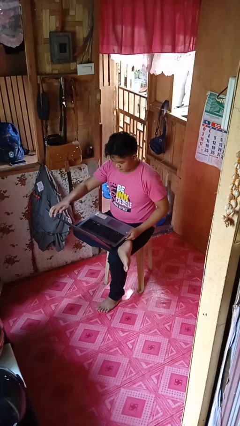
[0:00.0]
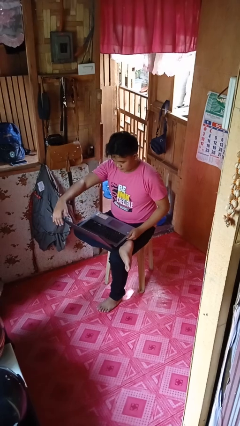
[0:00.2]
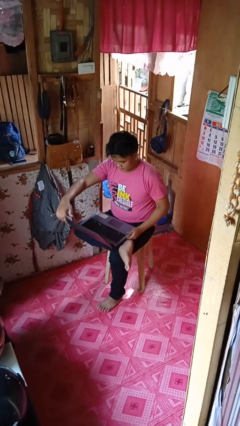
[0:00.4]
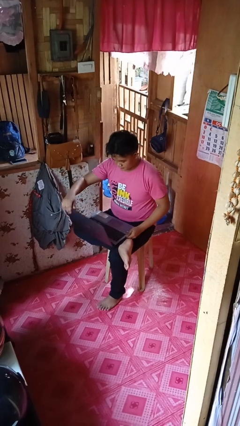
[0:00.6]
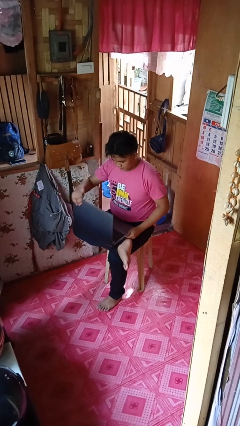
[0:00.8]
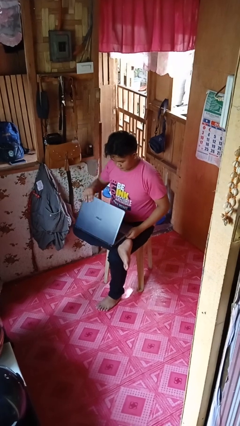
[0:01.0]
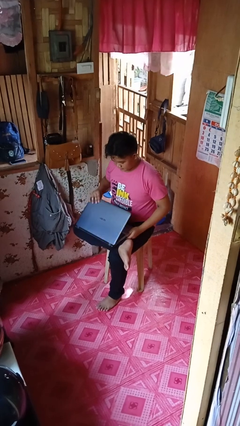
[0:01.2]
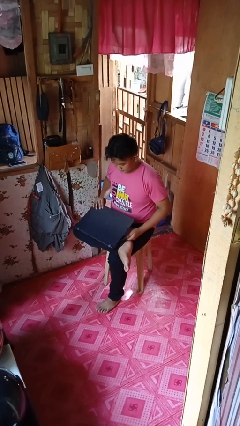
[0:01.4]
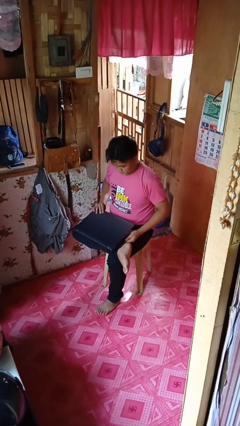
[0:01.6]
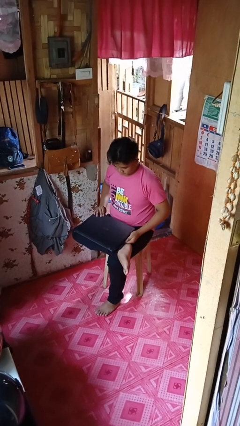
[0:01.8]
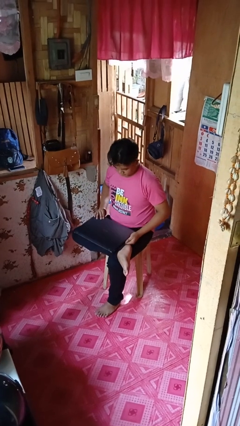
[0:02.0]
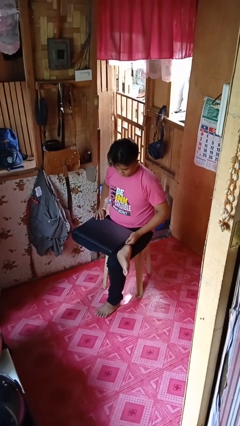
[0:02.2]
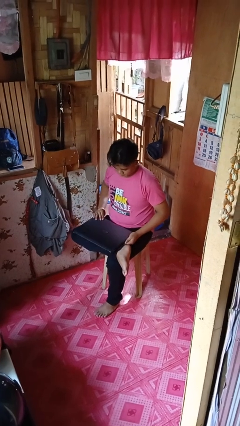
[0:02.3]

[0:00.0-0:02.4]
person closes laptop

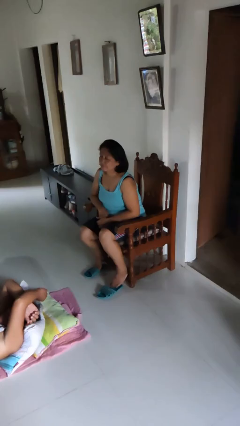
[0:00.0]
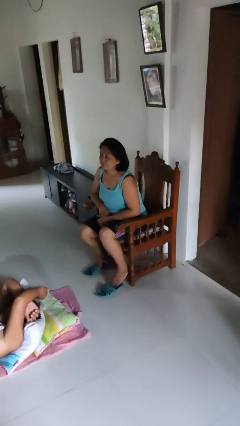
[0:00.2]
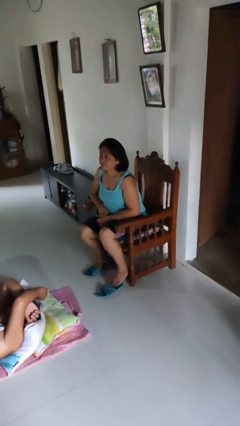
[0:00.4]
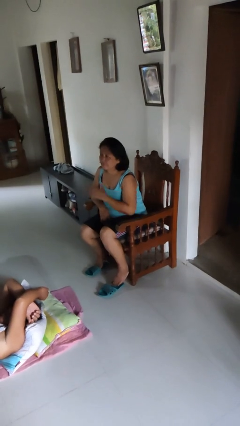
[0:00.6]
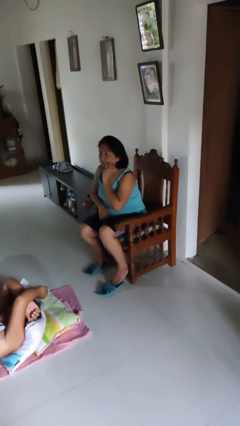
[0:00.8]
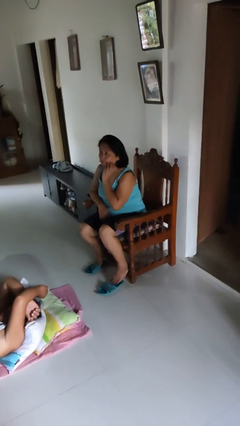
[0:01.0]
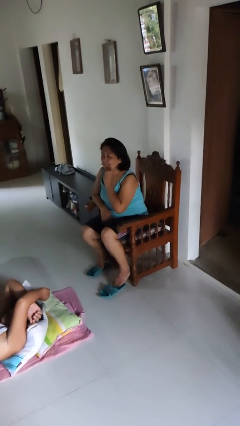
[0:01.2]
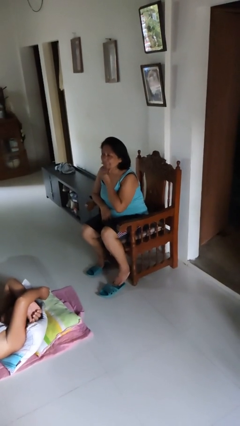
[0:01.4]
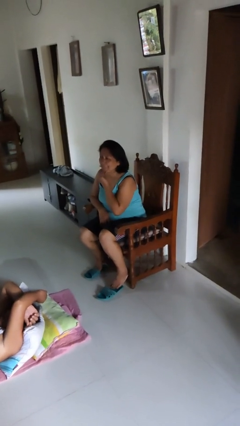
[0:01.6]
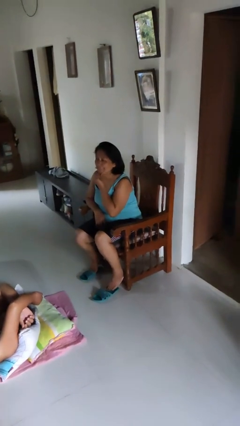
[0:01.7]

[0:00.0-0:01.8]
person strokes chin

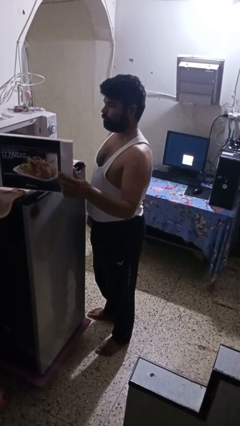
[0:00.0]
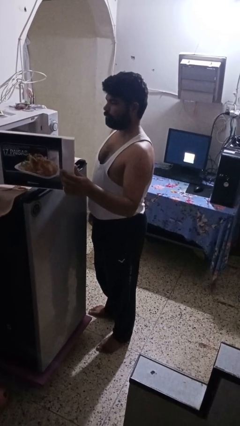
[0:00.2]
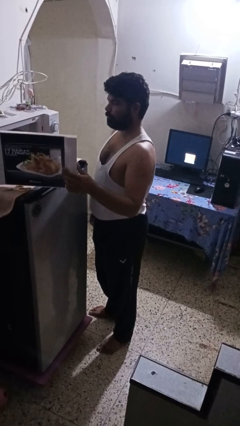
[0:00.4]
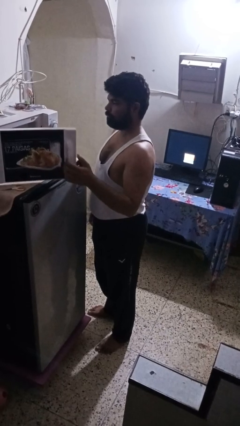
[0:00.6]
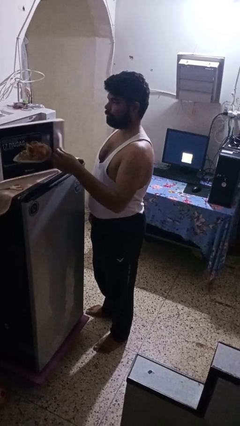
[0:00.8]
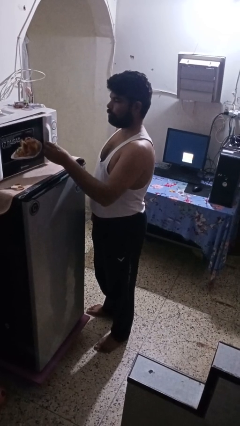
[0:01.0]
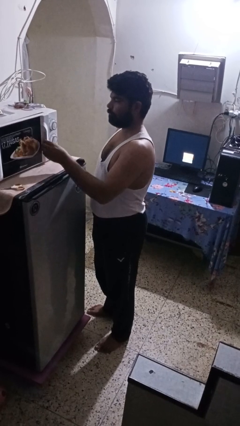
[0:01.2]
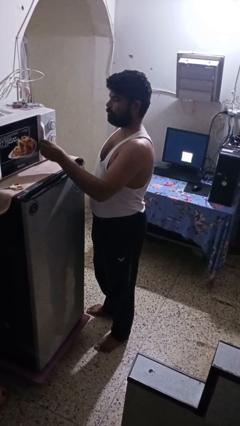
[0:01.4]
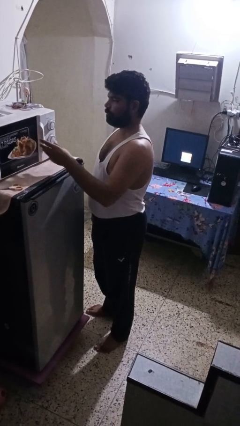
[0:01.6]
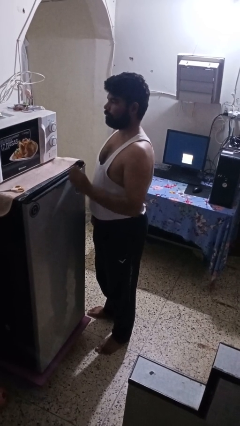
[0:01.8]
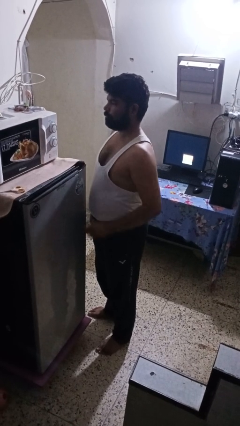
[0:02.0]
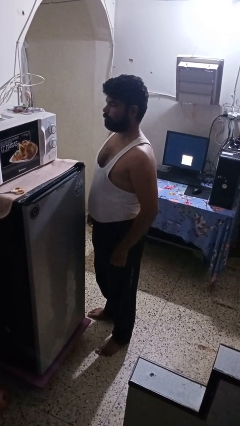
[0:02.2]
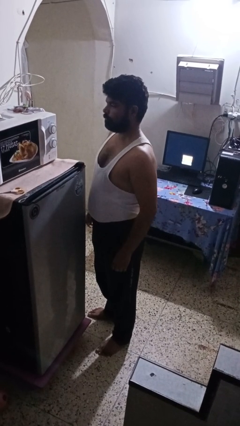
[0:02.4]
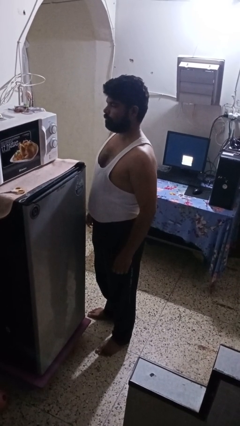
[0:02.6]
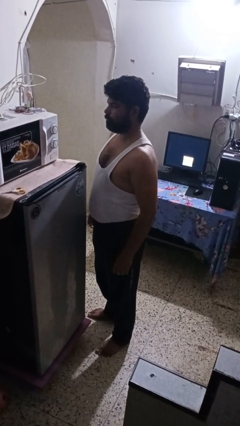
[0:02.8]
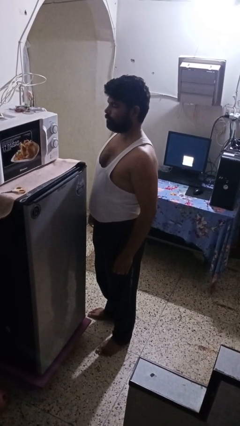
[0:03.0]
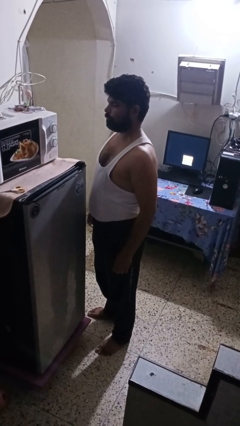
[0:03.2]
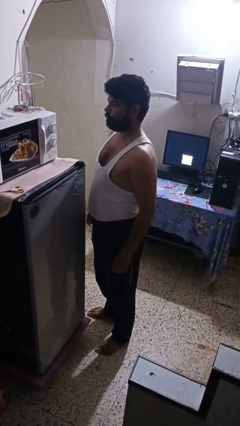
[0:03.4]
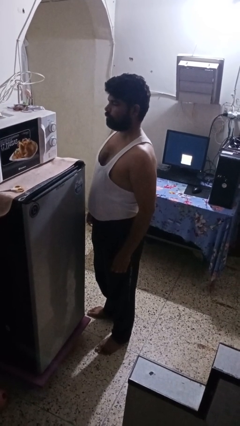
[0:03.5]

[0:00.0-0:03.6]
person closes microwave

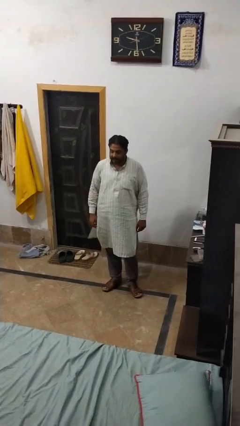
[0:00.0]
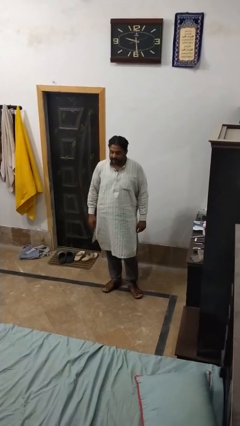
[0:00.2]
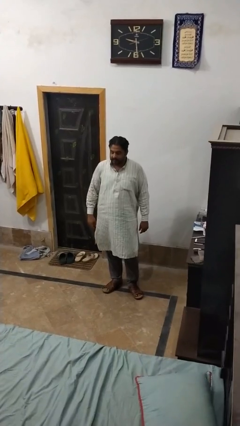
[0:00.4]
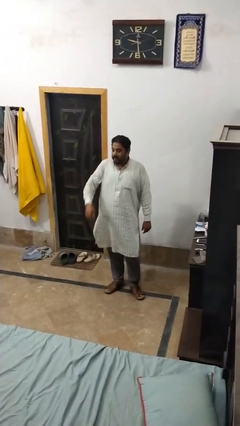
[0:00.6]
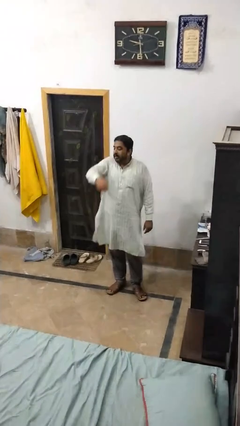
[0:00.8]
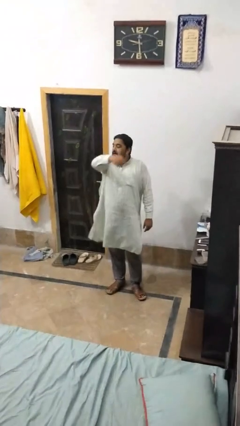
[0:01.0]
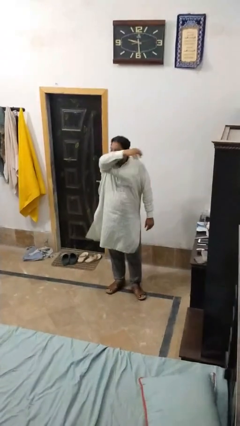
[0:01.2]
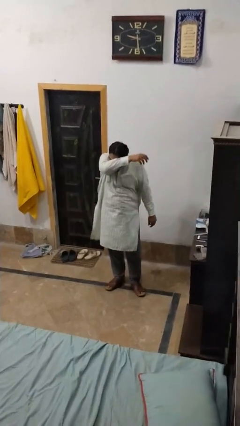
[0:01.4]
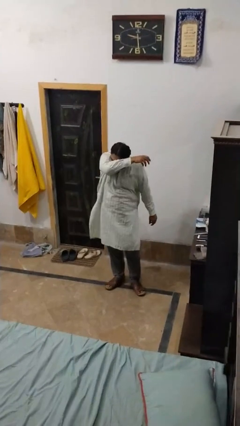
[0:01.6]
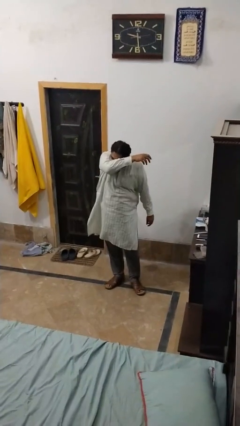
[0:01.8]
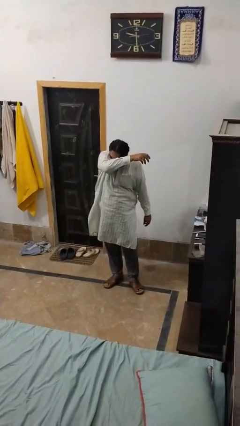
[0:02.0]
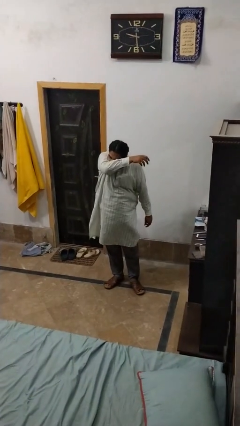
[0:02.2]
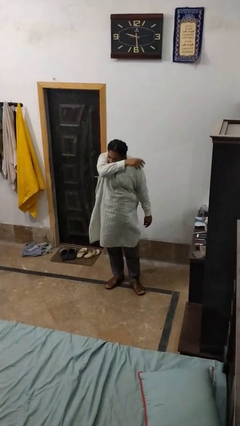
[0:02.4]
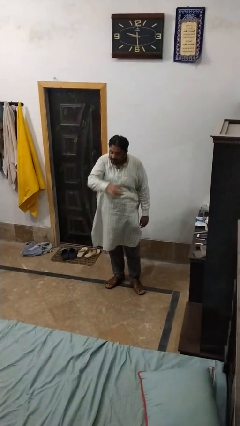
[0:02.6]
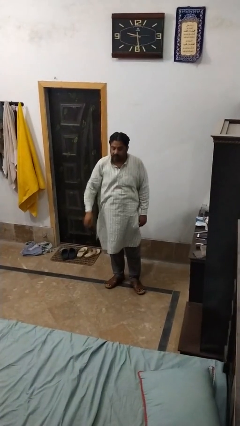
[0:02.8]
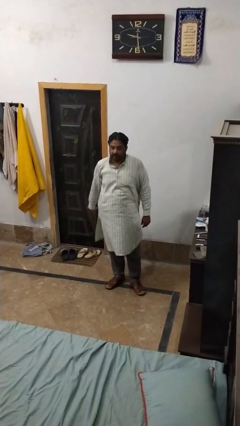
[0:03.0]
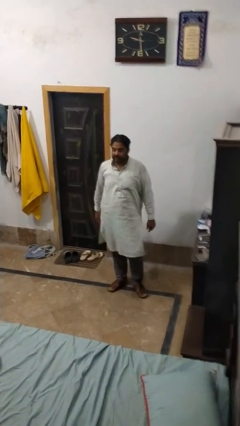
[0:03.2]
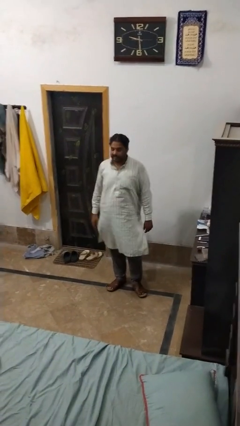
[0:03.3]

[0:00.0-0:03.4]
person sneezes into arm

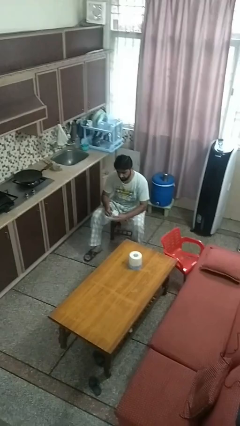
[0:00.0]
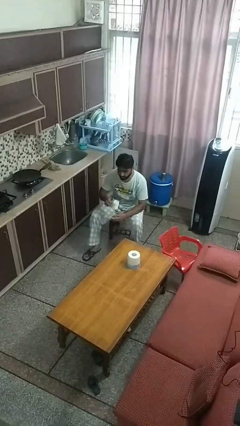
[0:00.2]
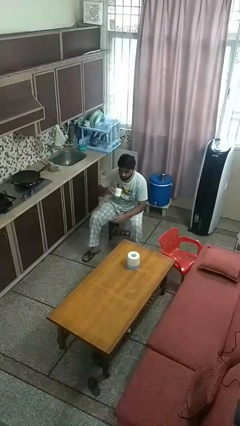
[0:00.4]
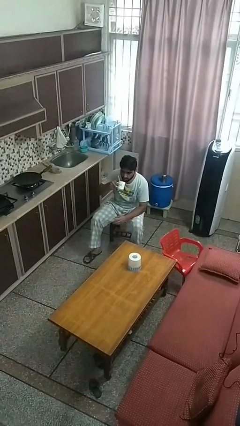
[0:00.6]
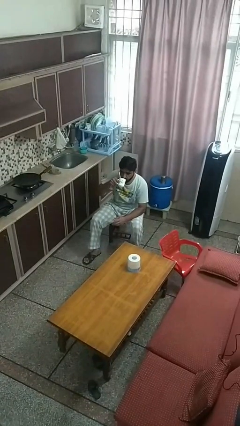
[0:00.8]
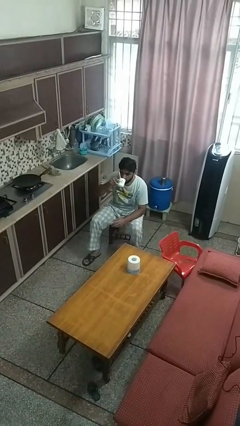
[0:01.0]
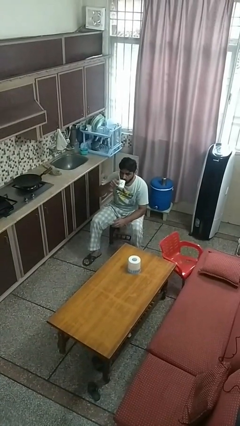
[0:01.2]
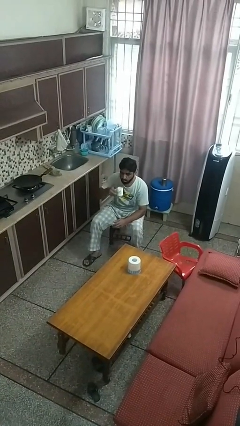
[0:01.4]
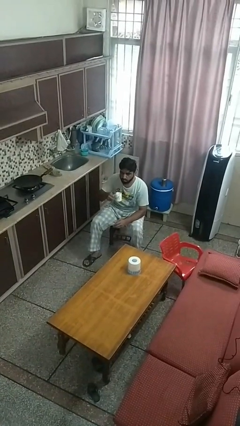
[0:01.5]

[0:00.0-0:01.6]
person drinks from mug

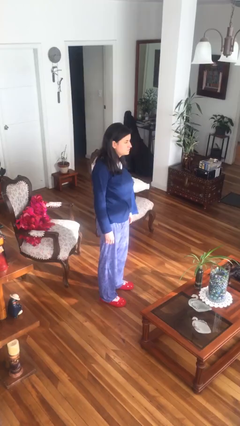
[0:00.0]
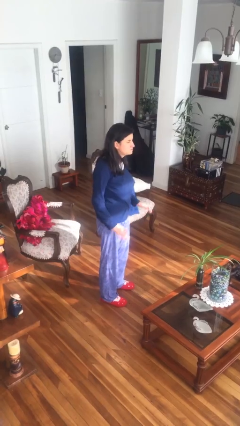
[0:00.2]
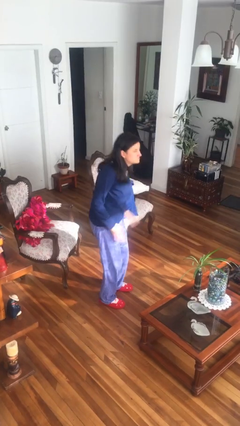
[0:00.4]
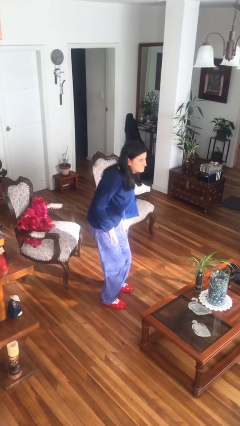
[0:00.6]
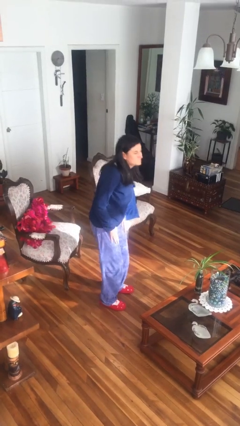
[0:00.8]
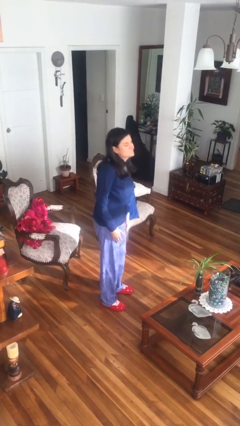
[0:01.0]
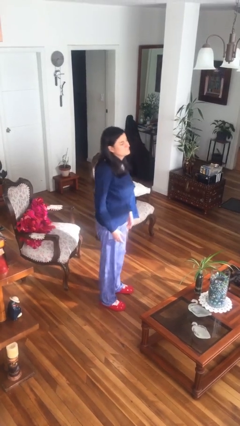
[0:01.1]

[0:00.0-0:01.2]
person slaps hands on thighs

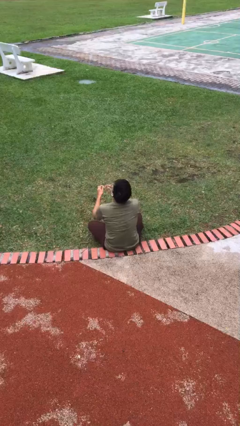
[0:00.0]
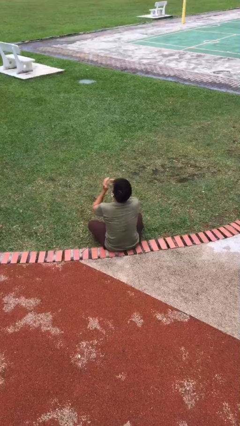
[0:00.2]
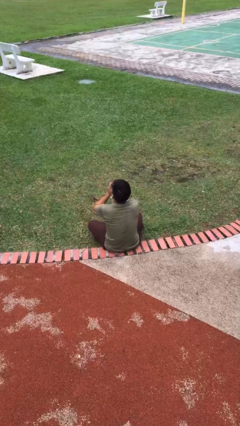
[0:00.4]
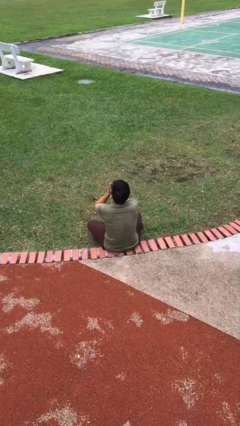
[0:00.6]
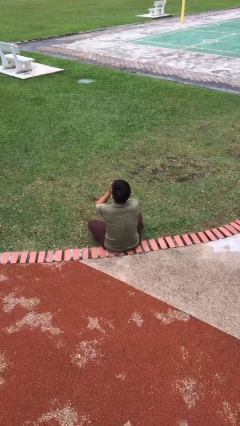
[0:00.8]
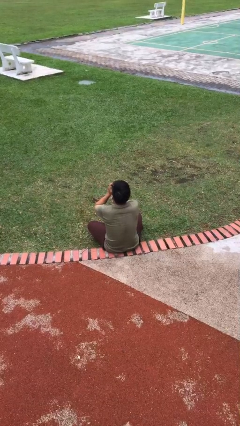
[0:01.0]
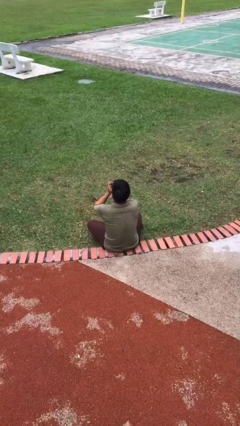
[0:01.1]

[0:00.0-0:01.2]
person sneezes into hand

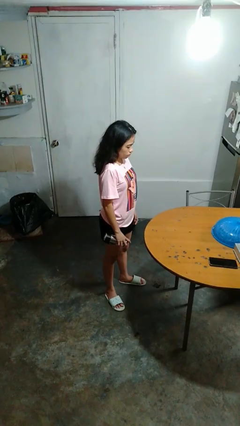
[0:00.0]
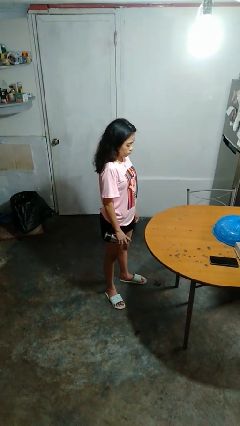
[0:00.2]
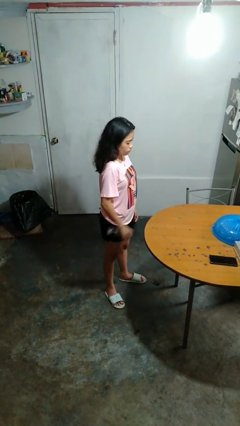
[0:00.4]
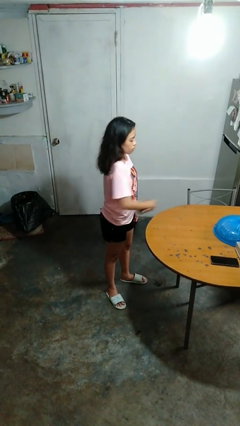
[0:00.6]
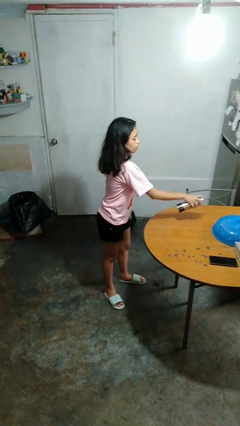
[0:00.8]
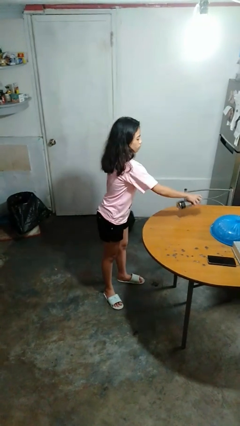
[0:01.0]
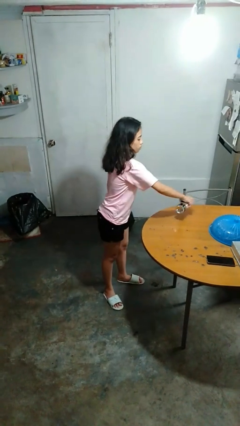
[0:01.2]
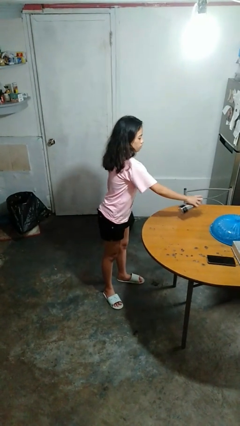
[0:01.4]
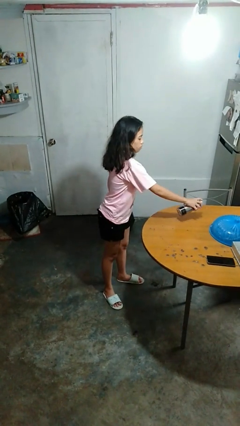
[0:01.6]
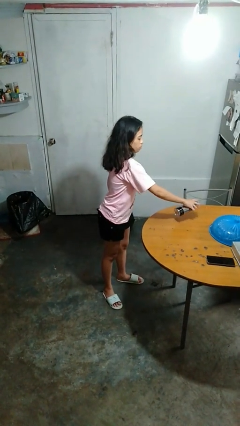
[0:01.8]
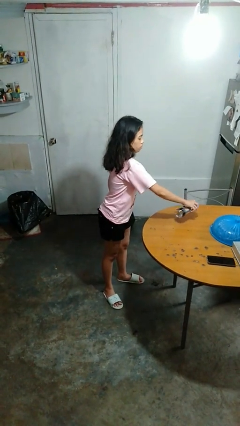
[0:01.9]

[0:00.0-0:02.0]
person sprays from bottle
